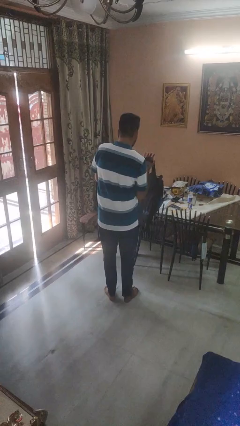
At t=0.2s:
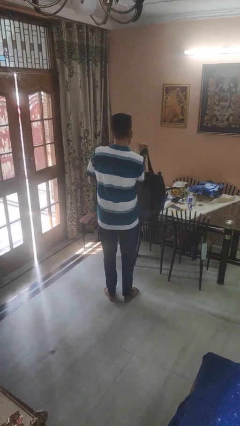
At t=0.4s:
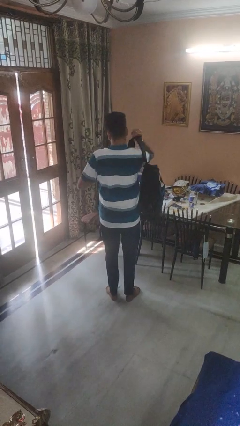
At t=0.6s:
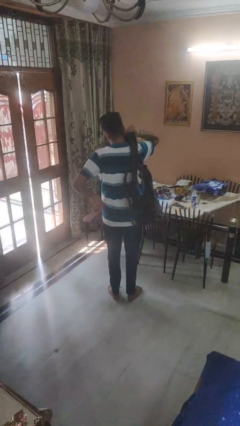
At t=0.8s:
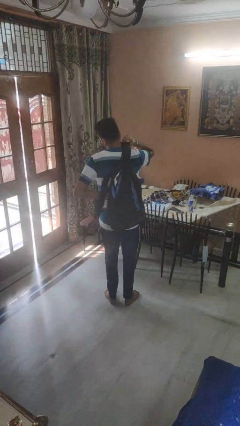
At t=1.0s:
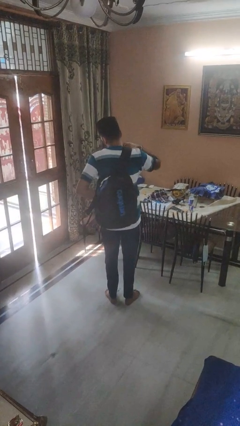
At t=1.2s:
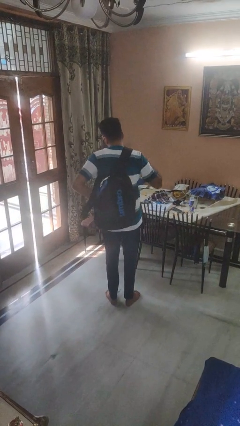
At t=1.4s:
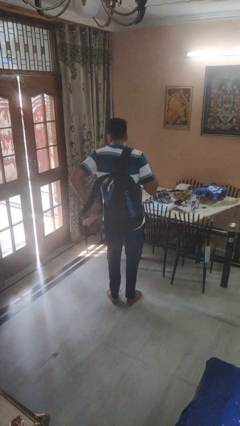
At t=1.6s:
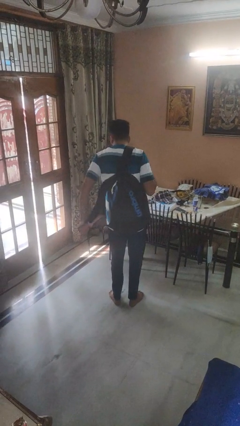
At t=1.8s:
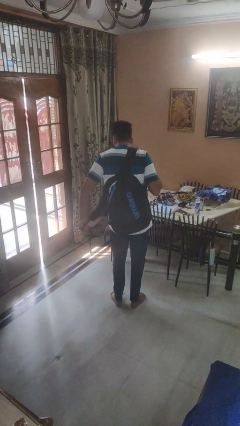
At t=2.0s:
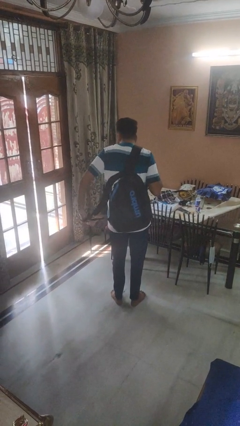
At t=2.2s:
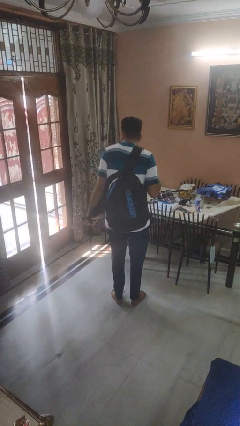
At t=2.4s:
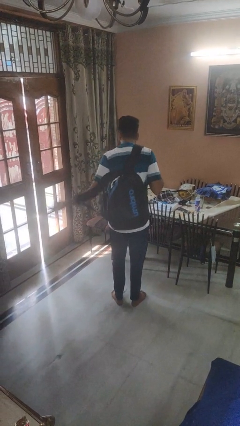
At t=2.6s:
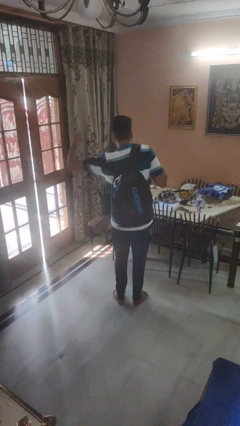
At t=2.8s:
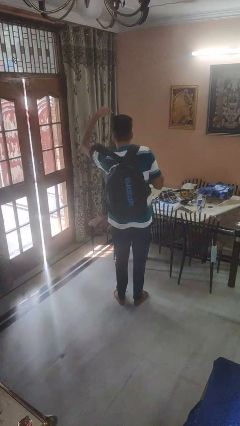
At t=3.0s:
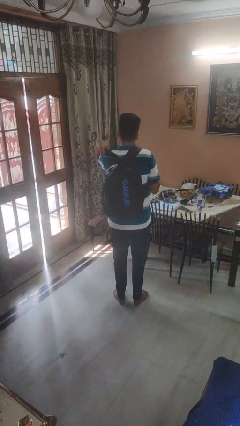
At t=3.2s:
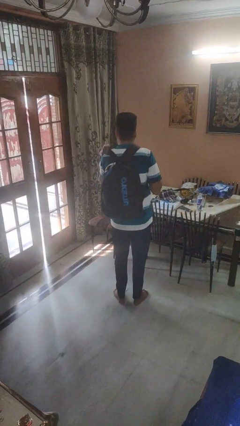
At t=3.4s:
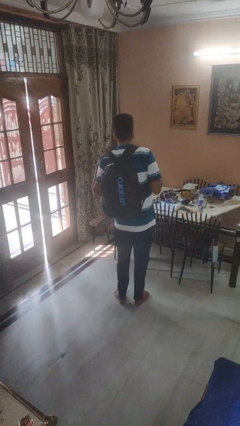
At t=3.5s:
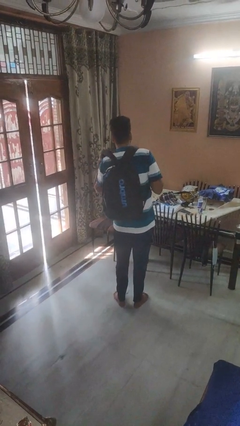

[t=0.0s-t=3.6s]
person puts on backpack

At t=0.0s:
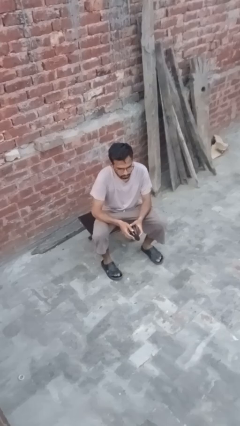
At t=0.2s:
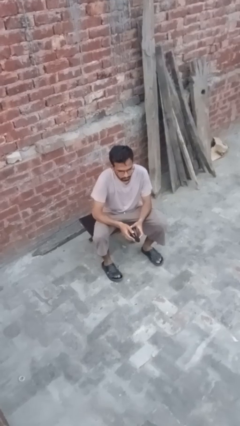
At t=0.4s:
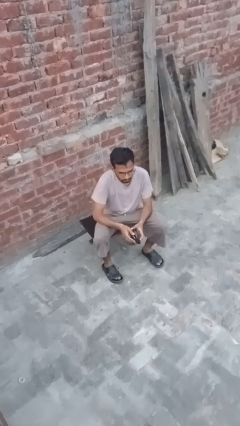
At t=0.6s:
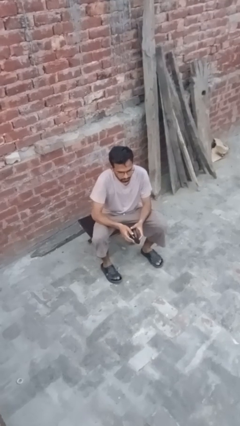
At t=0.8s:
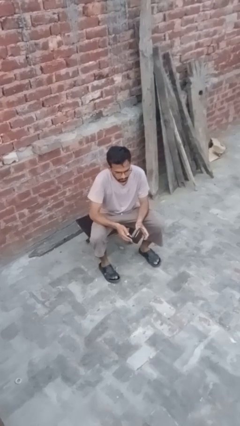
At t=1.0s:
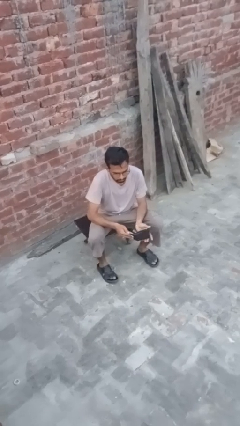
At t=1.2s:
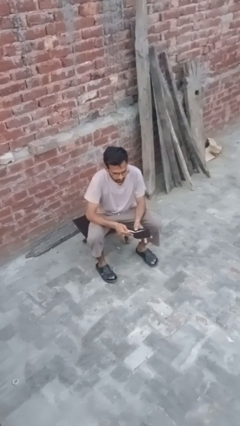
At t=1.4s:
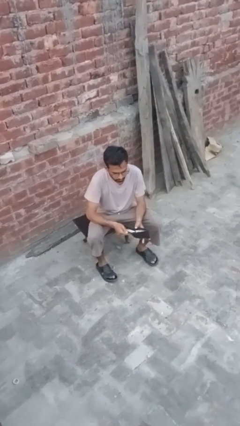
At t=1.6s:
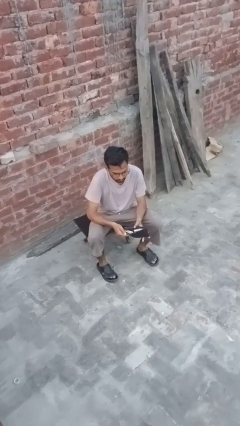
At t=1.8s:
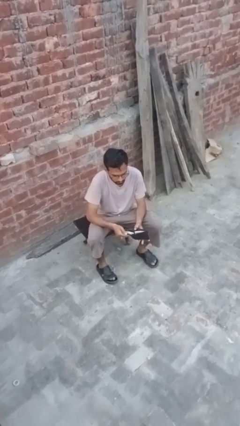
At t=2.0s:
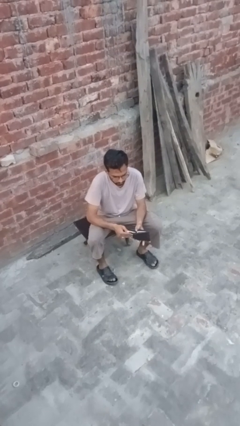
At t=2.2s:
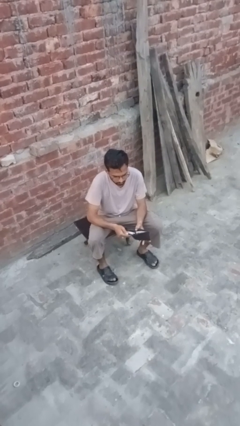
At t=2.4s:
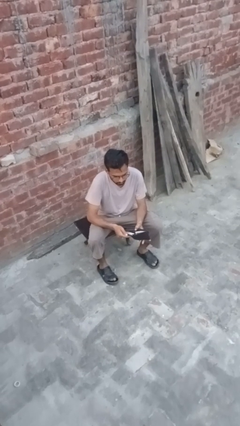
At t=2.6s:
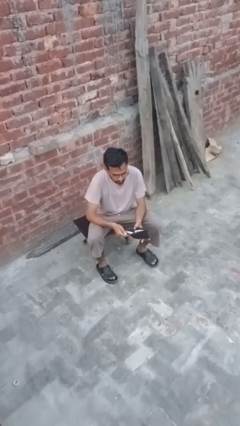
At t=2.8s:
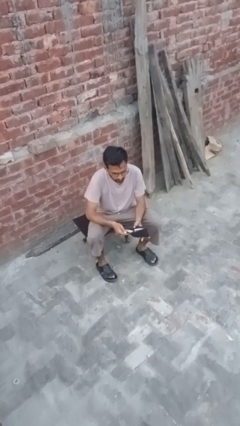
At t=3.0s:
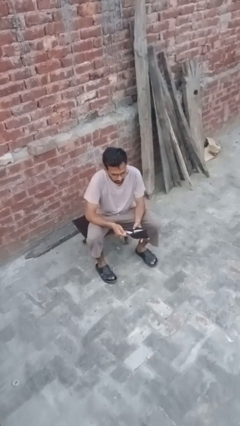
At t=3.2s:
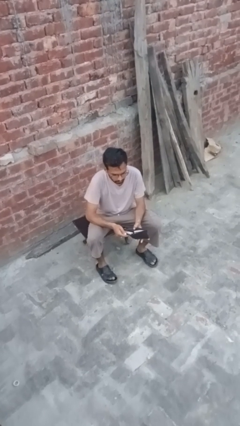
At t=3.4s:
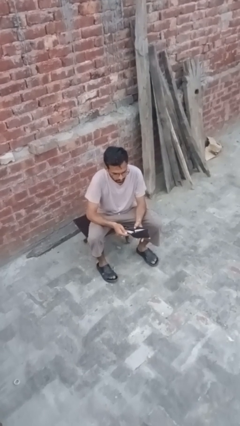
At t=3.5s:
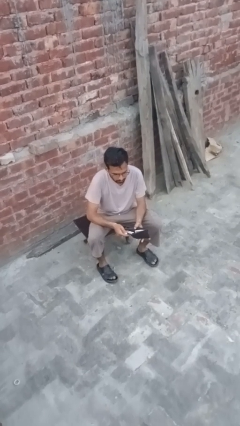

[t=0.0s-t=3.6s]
person searches in purse

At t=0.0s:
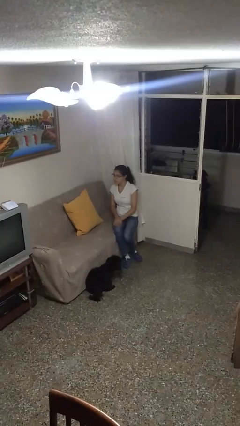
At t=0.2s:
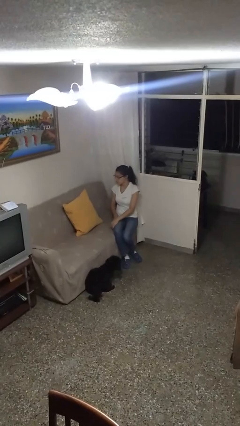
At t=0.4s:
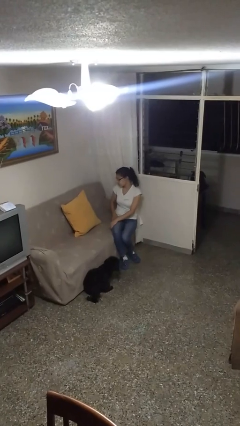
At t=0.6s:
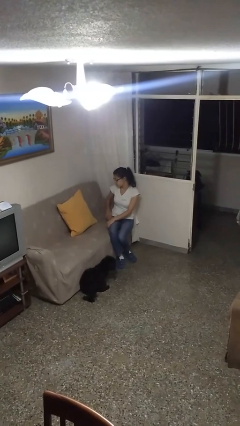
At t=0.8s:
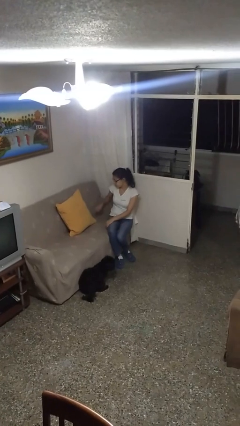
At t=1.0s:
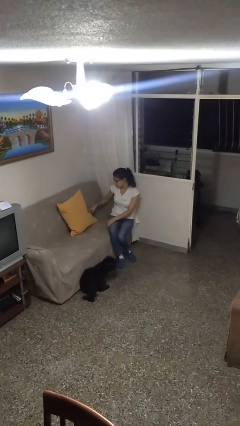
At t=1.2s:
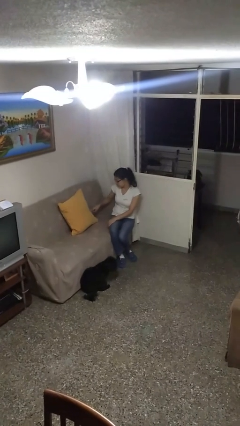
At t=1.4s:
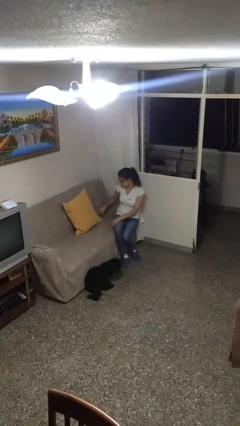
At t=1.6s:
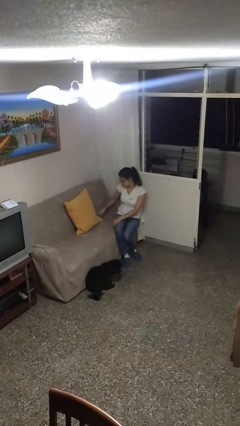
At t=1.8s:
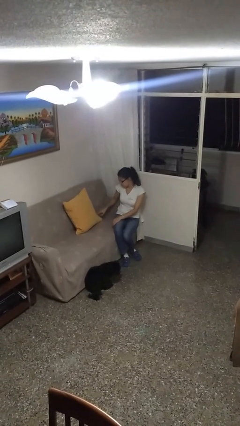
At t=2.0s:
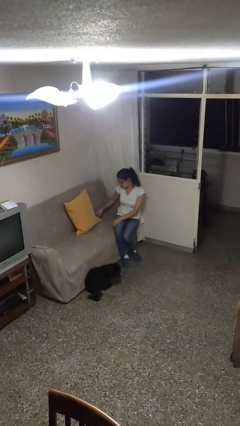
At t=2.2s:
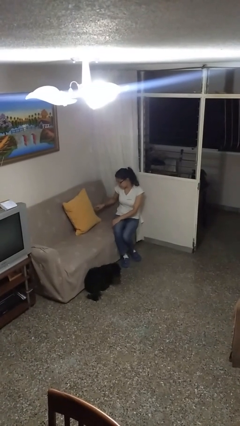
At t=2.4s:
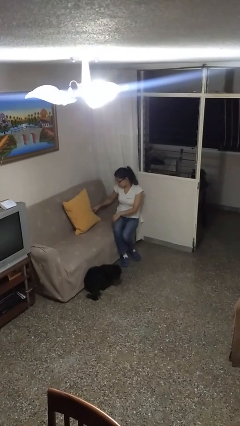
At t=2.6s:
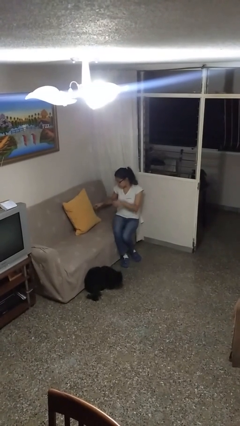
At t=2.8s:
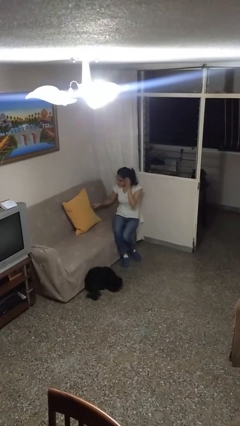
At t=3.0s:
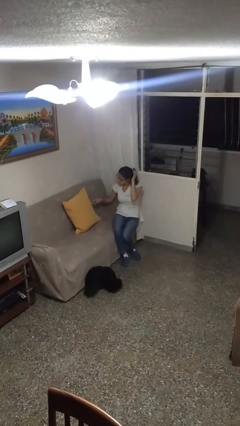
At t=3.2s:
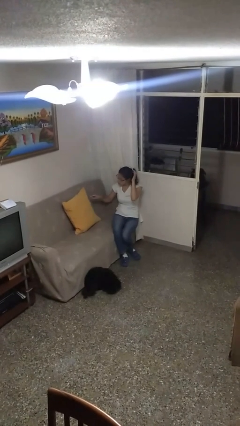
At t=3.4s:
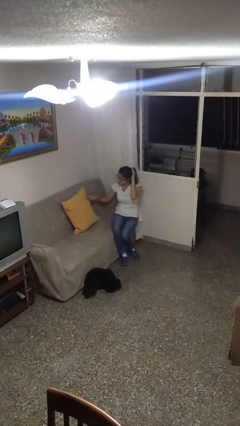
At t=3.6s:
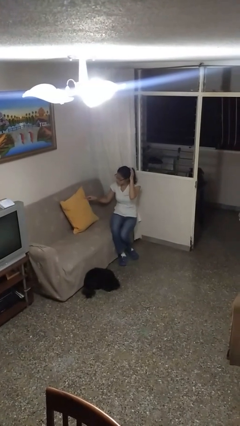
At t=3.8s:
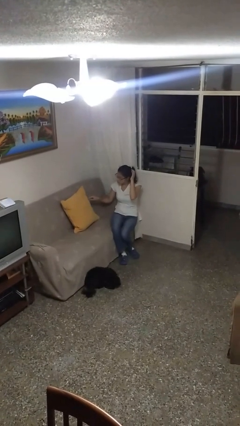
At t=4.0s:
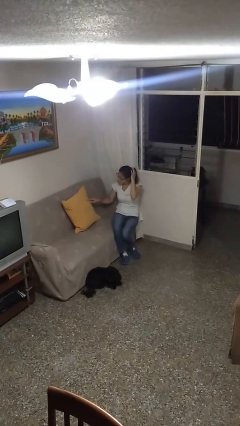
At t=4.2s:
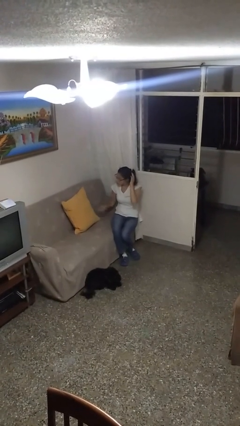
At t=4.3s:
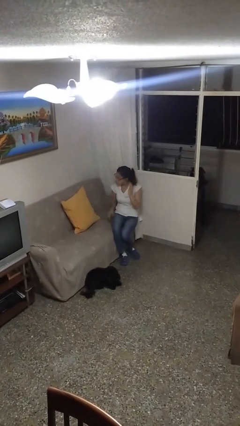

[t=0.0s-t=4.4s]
person taps object with finger

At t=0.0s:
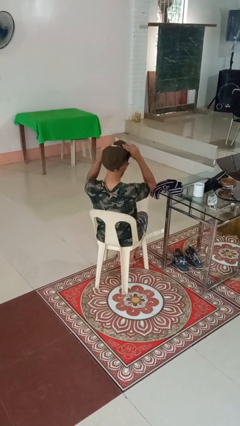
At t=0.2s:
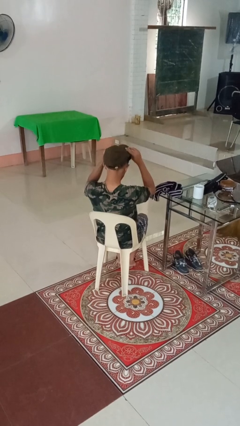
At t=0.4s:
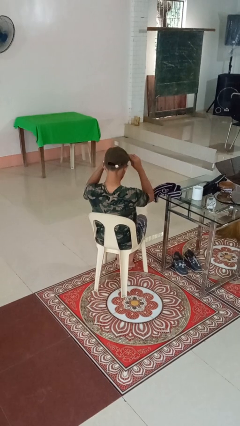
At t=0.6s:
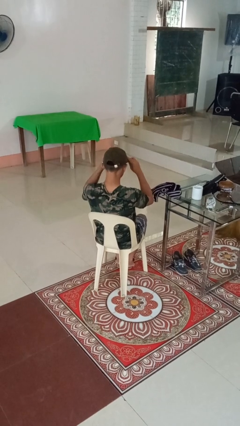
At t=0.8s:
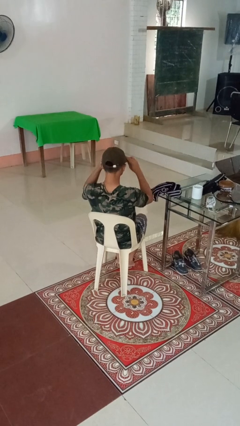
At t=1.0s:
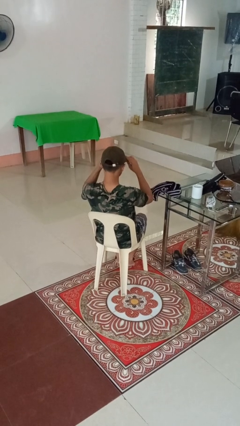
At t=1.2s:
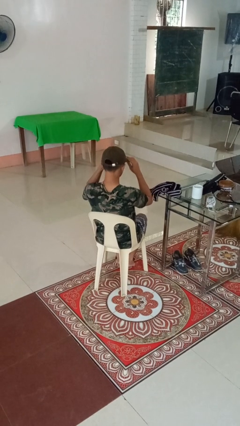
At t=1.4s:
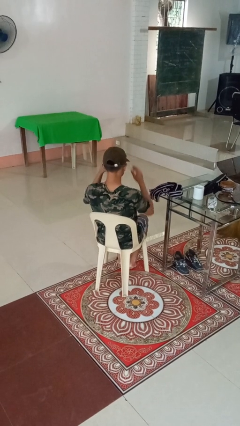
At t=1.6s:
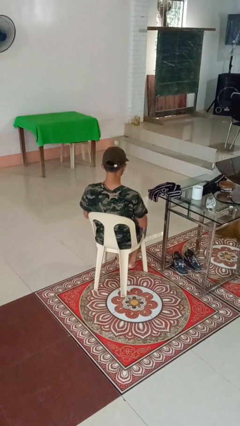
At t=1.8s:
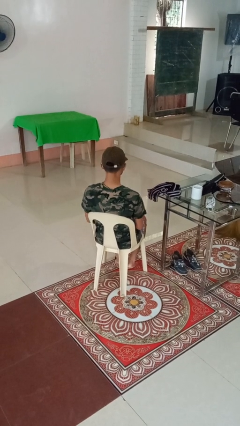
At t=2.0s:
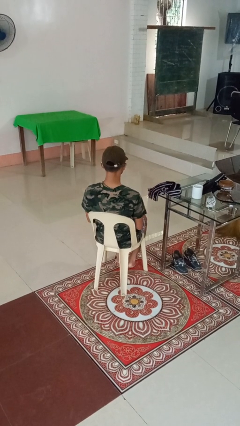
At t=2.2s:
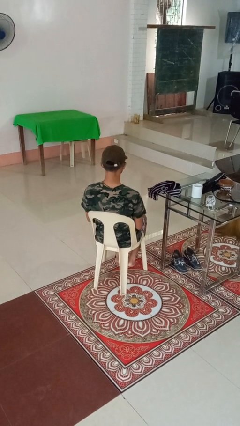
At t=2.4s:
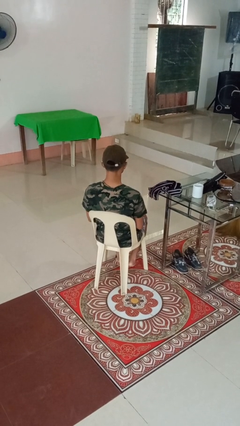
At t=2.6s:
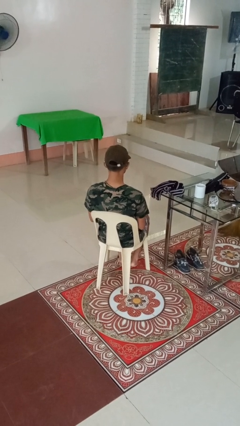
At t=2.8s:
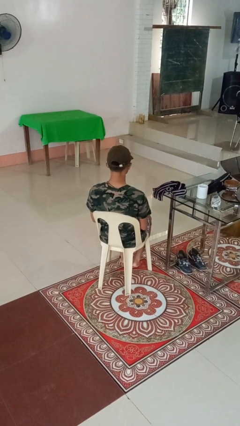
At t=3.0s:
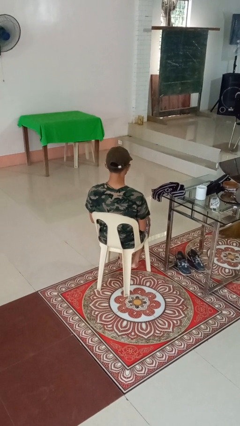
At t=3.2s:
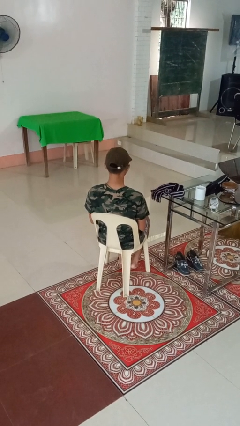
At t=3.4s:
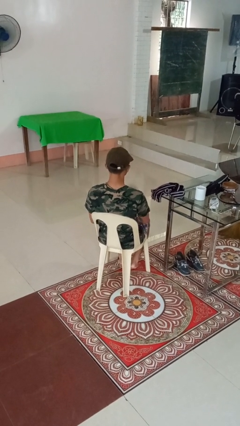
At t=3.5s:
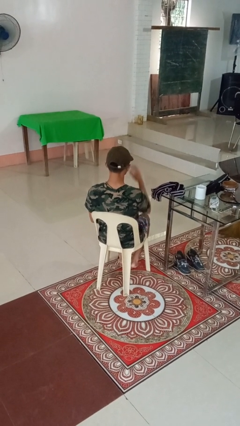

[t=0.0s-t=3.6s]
person puts on hat

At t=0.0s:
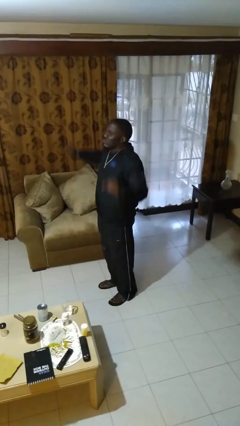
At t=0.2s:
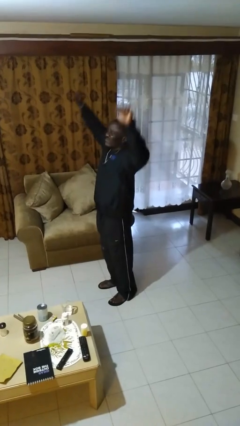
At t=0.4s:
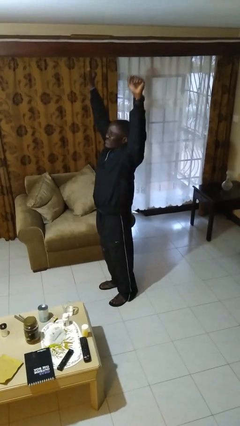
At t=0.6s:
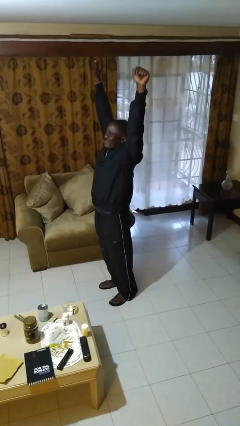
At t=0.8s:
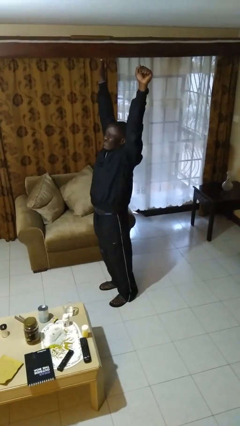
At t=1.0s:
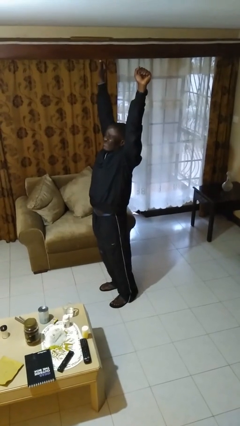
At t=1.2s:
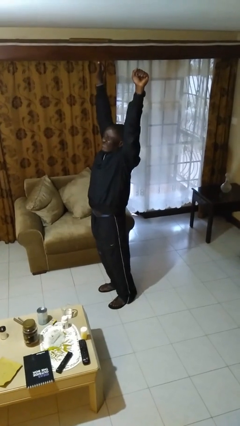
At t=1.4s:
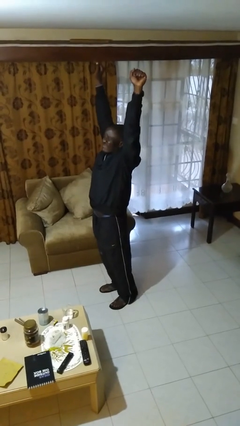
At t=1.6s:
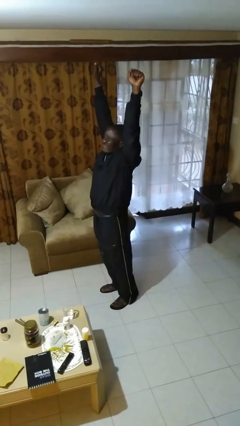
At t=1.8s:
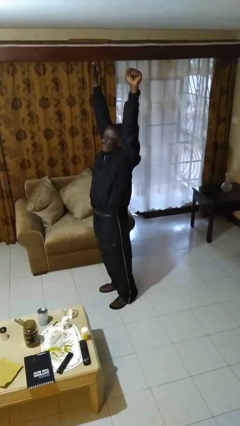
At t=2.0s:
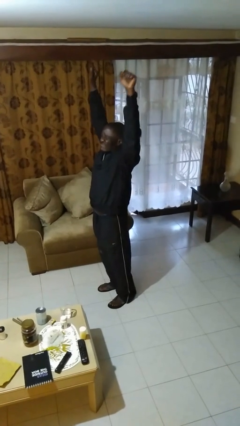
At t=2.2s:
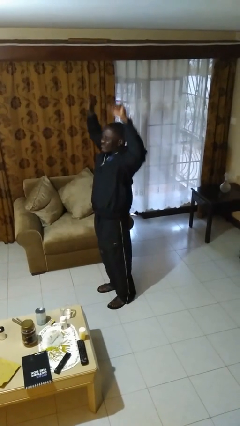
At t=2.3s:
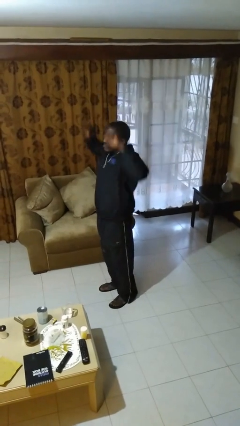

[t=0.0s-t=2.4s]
person stretches arms over head
